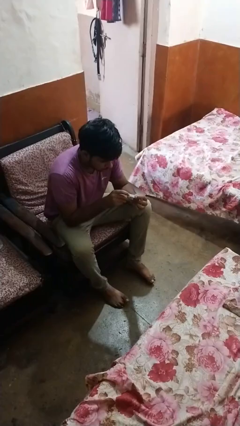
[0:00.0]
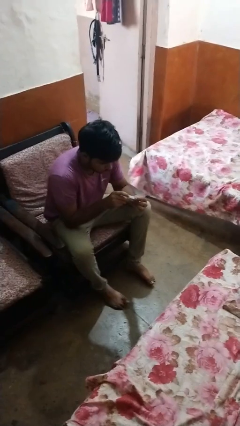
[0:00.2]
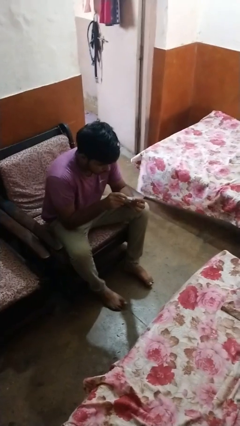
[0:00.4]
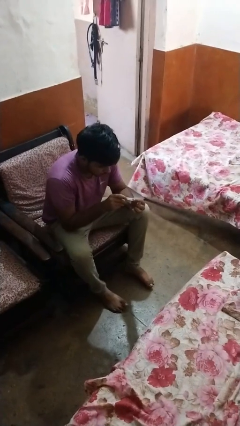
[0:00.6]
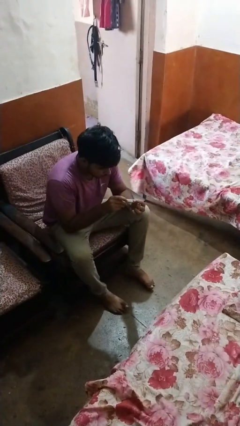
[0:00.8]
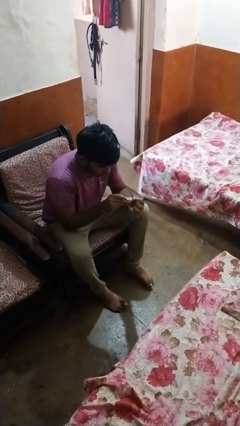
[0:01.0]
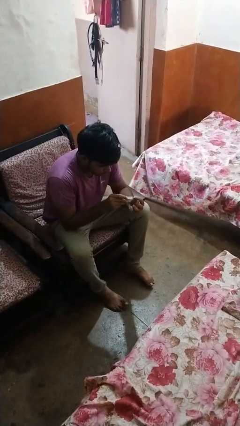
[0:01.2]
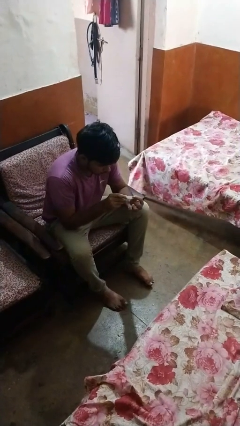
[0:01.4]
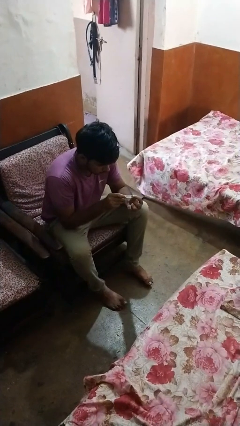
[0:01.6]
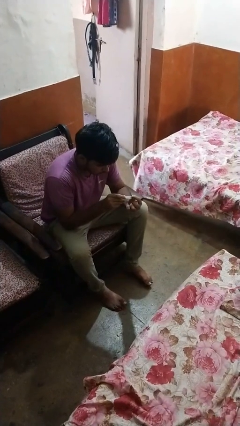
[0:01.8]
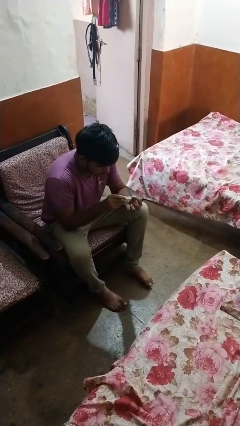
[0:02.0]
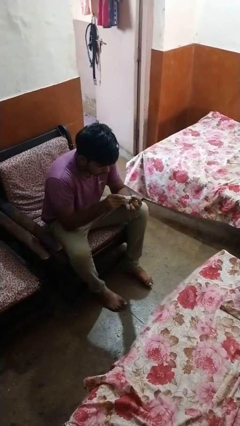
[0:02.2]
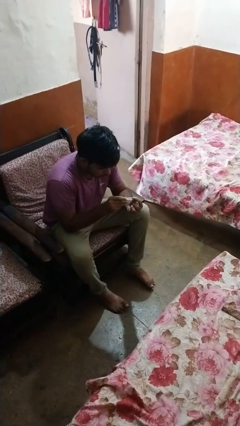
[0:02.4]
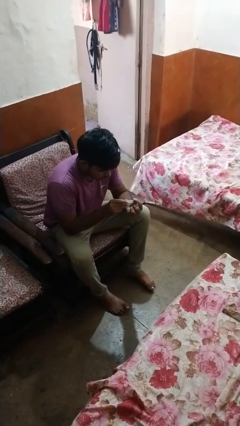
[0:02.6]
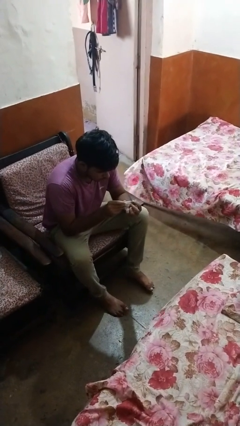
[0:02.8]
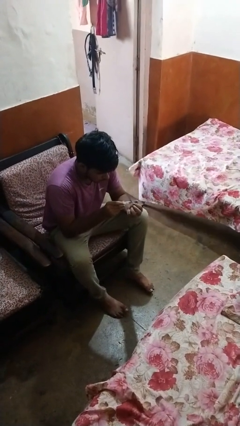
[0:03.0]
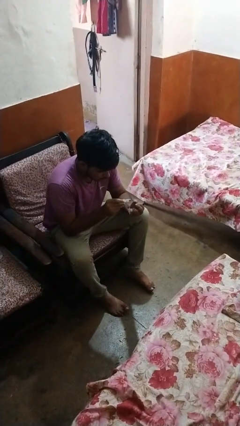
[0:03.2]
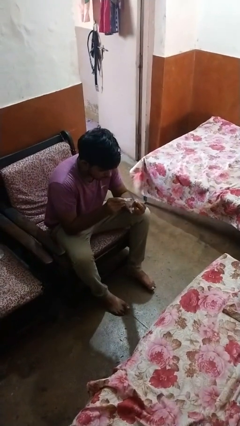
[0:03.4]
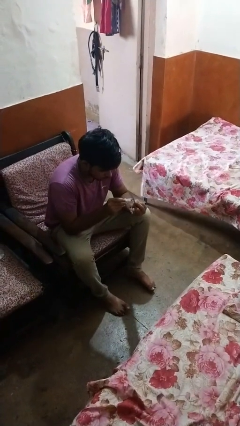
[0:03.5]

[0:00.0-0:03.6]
person clips fingernails

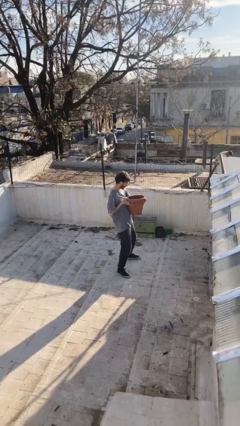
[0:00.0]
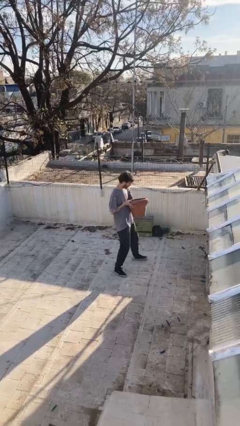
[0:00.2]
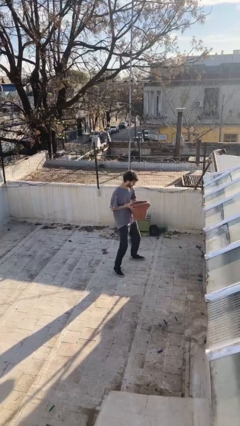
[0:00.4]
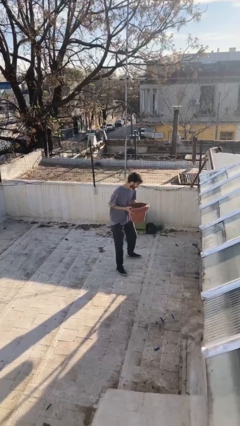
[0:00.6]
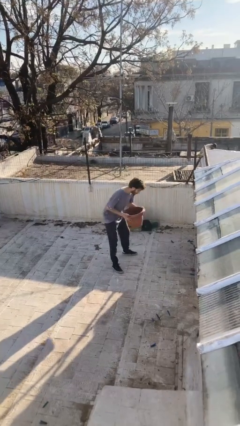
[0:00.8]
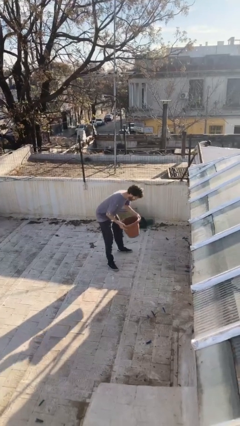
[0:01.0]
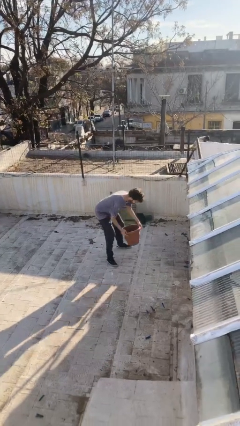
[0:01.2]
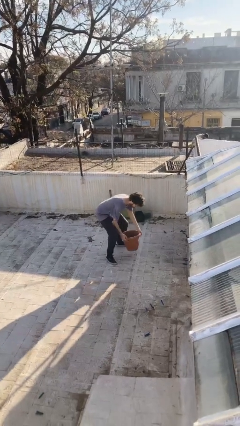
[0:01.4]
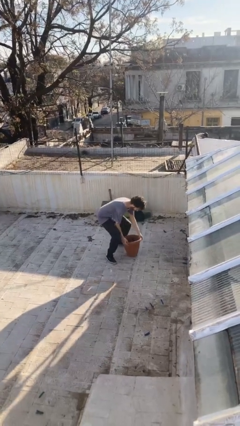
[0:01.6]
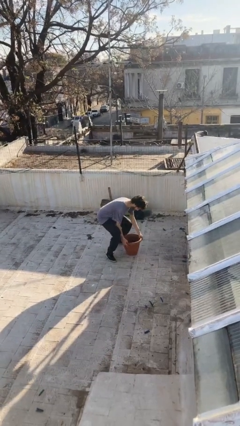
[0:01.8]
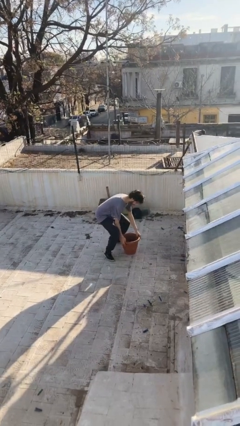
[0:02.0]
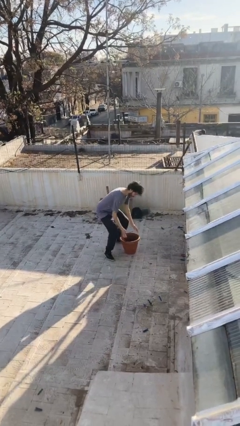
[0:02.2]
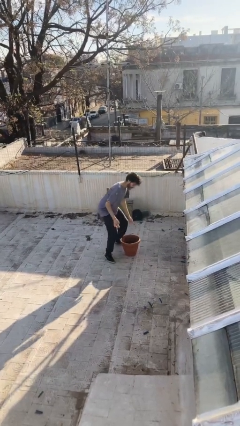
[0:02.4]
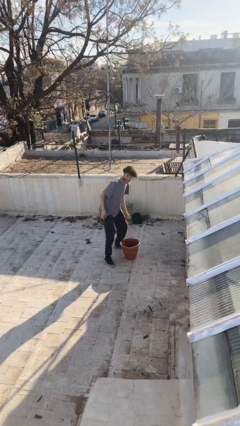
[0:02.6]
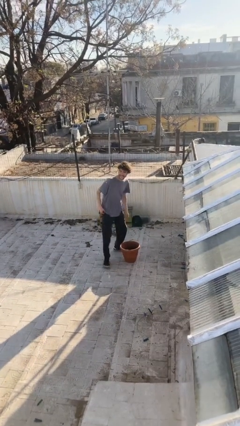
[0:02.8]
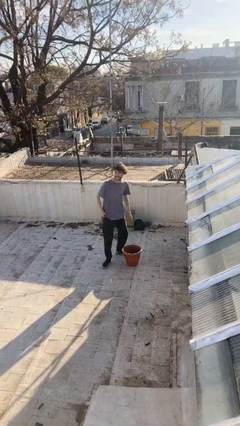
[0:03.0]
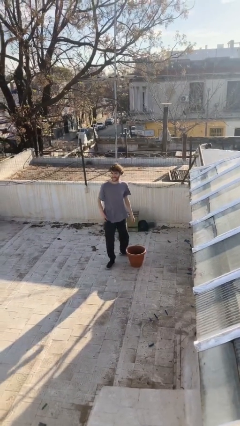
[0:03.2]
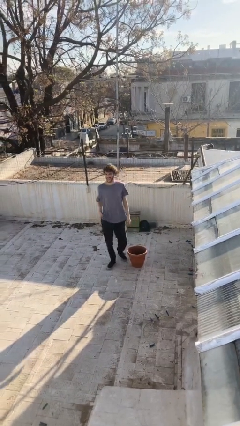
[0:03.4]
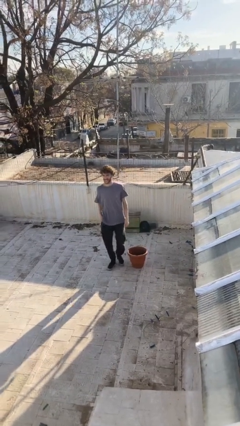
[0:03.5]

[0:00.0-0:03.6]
person puts down object on floor

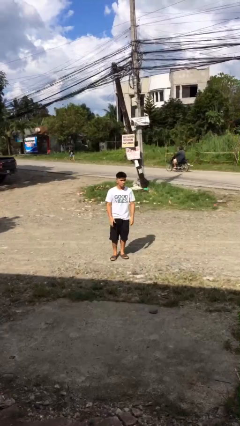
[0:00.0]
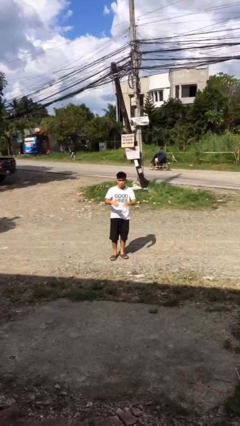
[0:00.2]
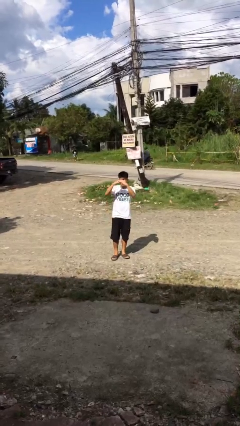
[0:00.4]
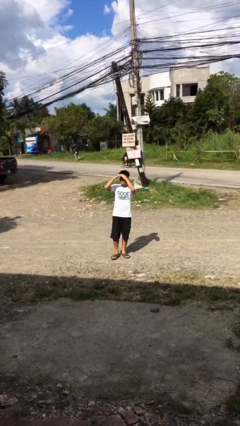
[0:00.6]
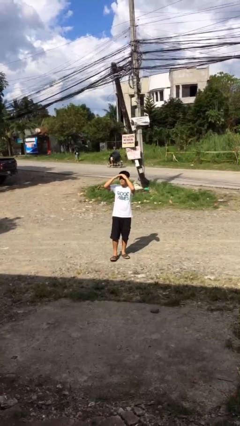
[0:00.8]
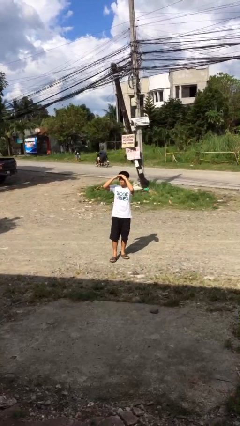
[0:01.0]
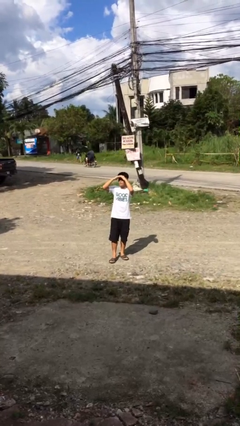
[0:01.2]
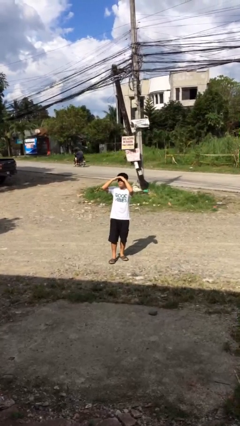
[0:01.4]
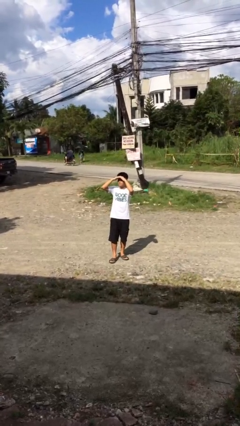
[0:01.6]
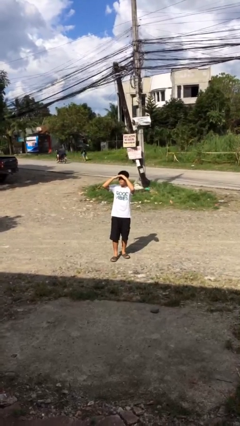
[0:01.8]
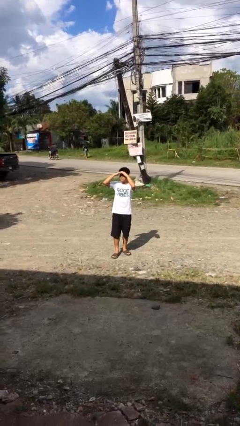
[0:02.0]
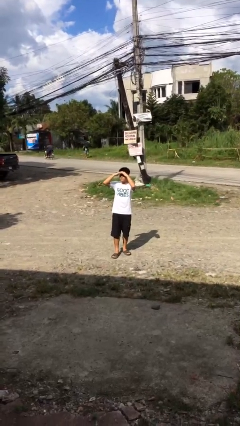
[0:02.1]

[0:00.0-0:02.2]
person shades eyes

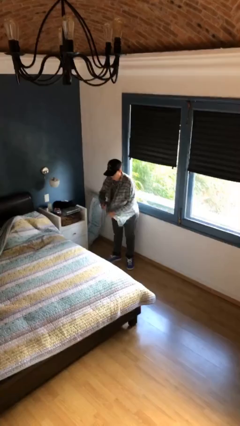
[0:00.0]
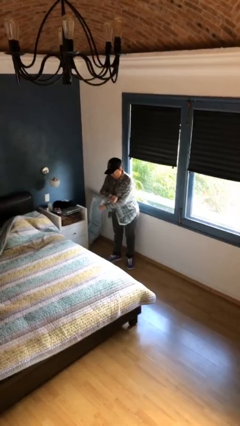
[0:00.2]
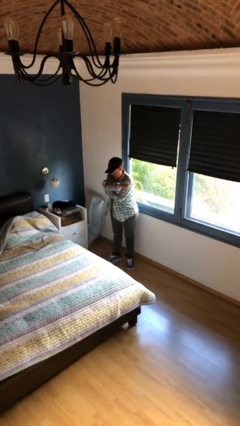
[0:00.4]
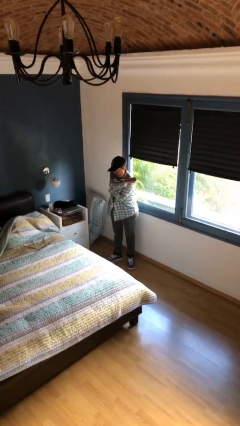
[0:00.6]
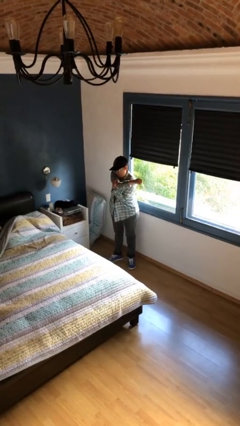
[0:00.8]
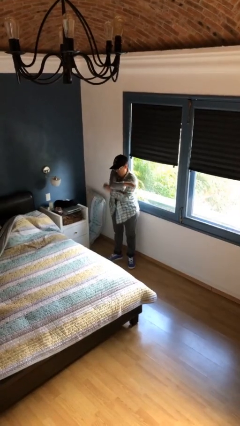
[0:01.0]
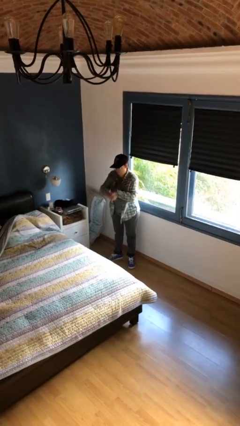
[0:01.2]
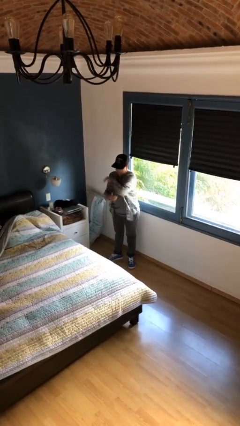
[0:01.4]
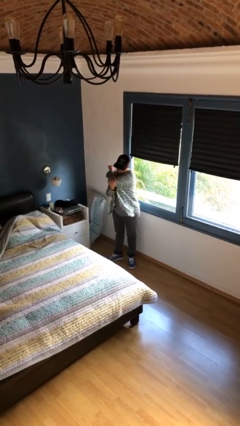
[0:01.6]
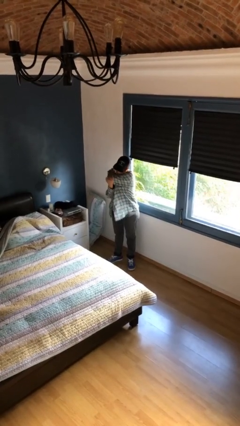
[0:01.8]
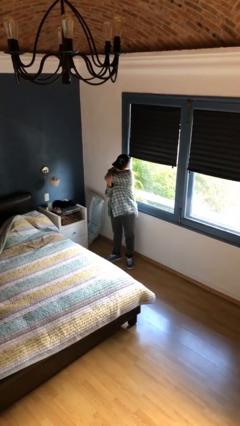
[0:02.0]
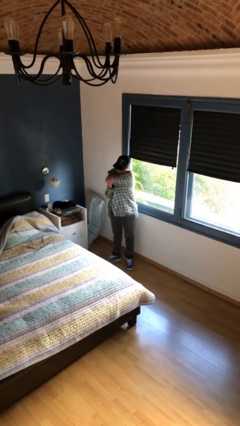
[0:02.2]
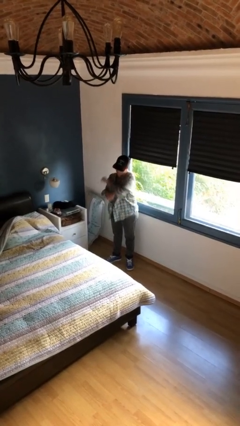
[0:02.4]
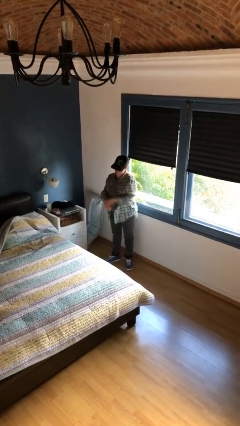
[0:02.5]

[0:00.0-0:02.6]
person stretches arms to side

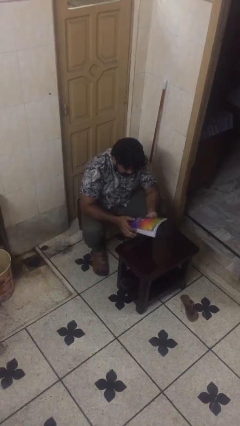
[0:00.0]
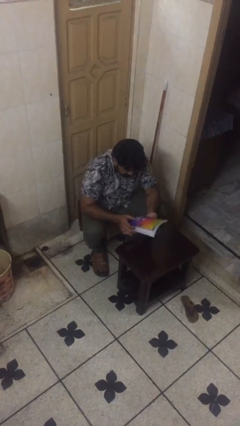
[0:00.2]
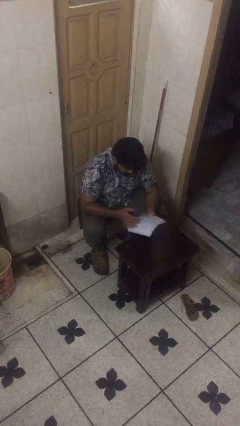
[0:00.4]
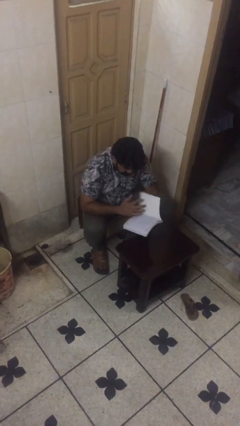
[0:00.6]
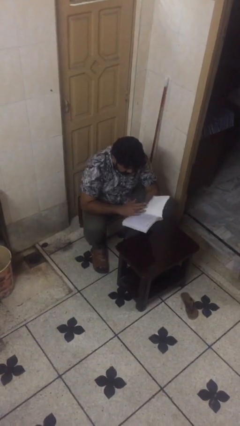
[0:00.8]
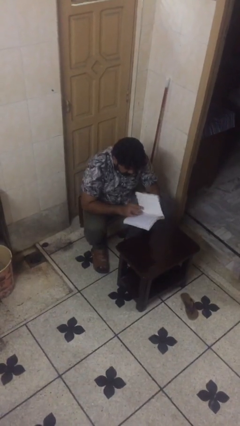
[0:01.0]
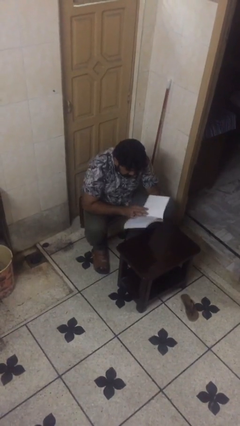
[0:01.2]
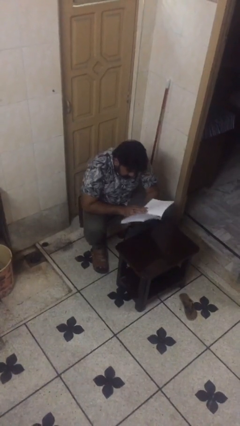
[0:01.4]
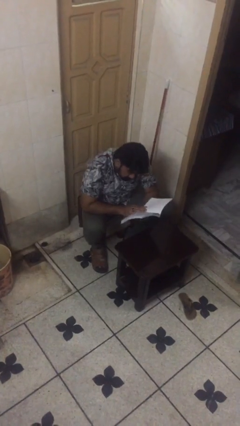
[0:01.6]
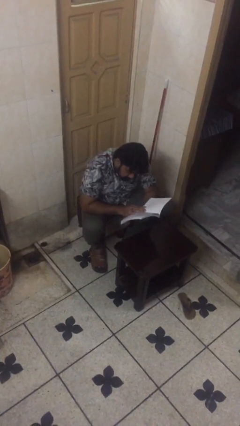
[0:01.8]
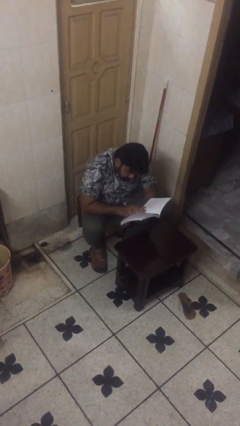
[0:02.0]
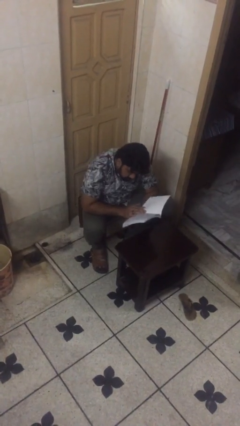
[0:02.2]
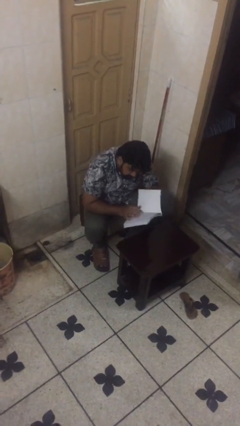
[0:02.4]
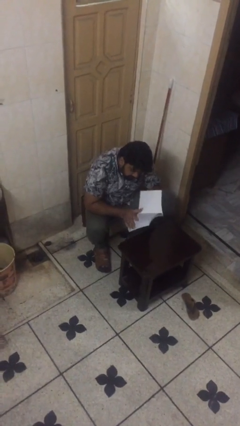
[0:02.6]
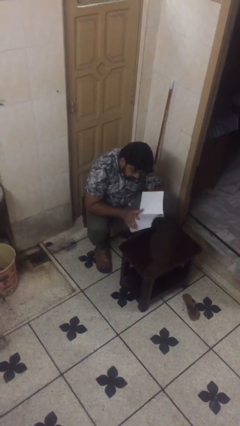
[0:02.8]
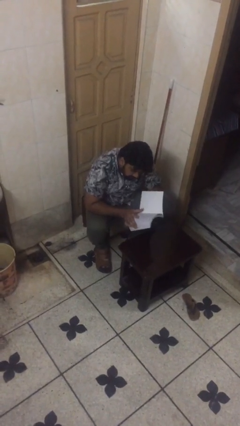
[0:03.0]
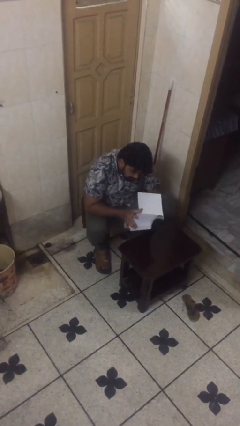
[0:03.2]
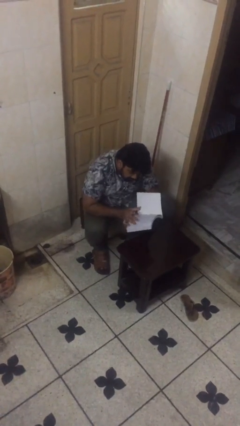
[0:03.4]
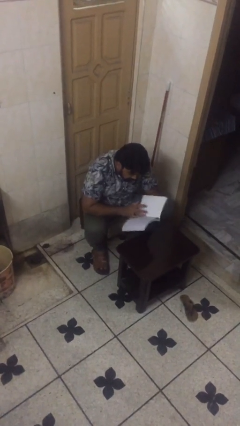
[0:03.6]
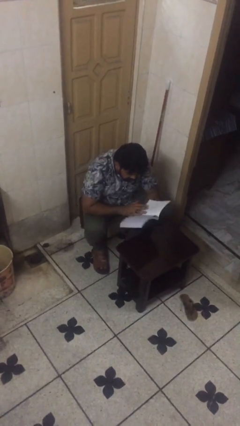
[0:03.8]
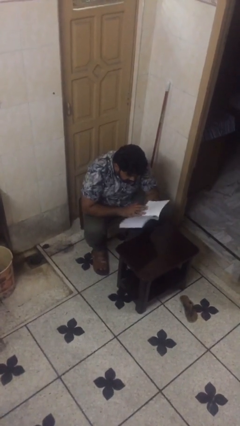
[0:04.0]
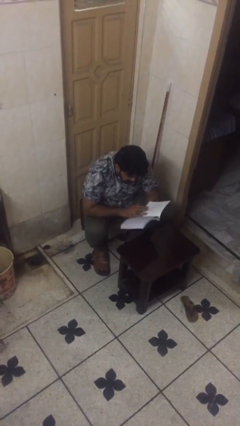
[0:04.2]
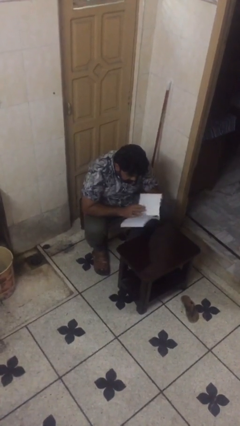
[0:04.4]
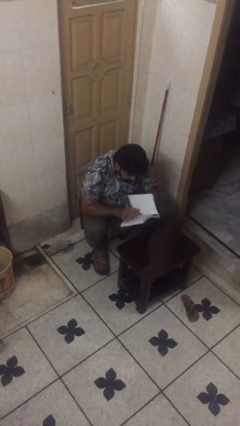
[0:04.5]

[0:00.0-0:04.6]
person reads document

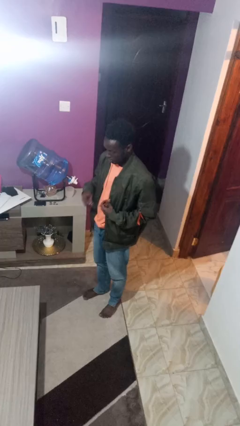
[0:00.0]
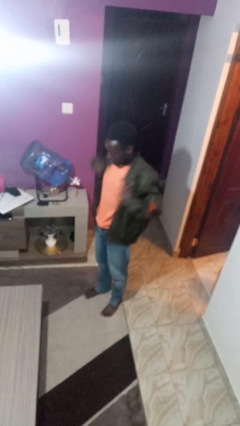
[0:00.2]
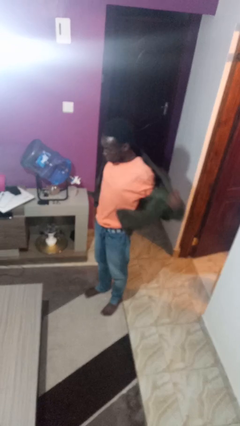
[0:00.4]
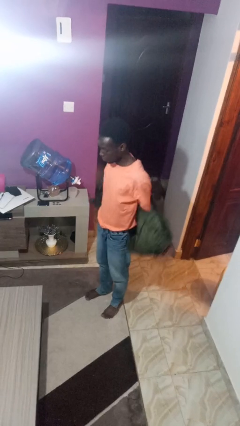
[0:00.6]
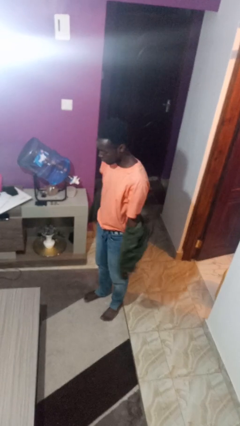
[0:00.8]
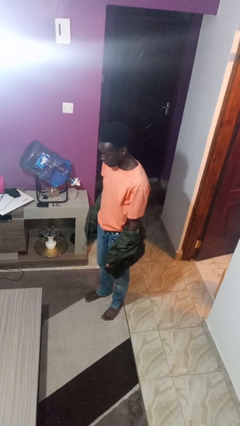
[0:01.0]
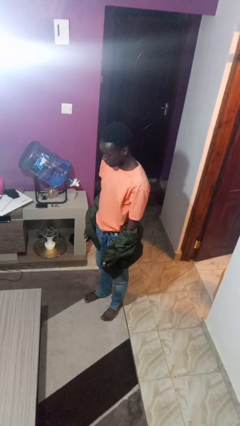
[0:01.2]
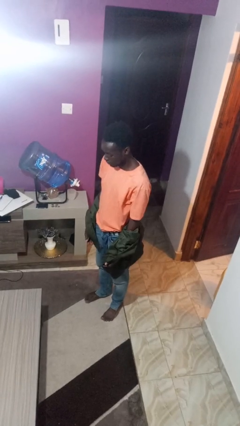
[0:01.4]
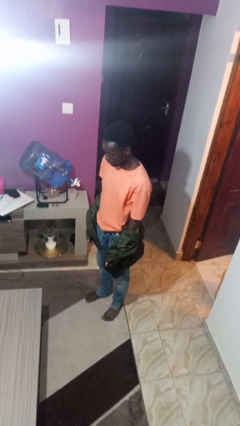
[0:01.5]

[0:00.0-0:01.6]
person takes off jacket
